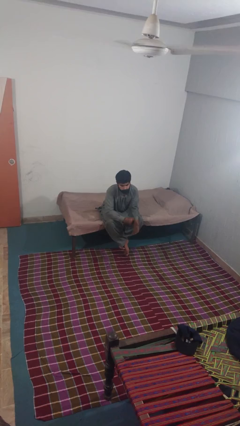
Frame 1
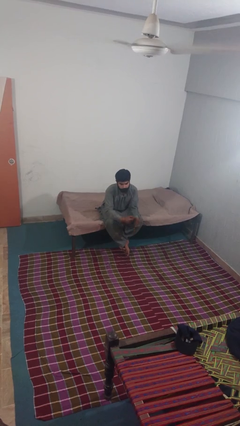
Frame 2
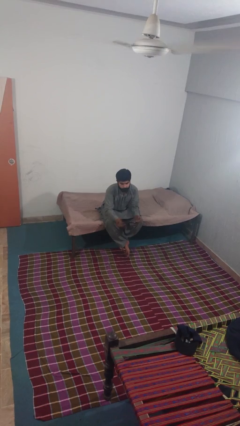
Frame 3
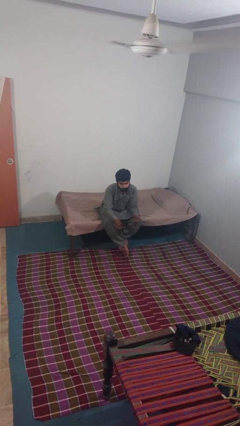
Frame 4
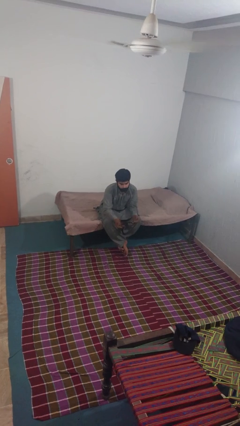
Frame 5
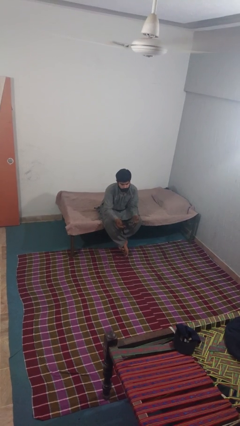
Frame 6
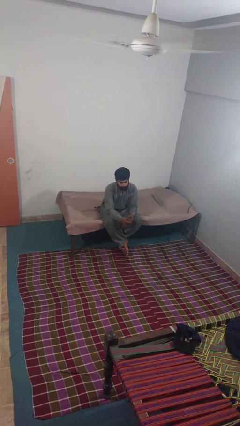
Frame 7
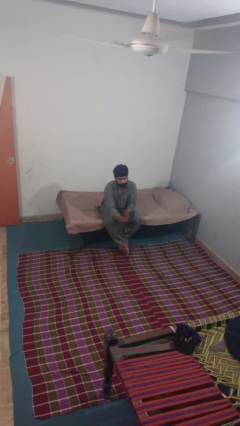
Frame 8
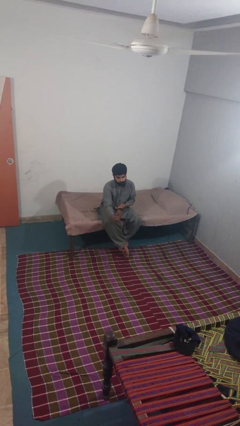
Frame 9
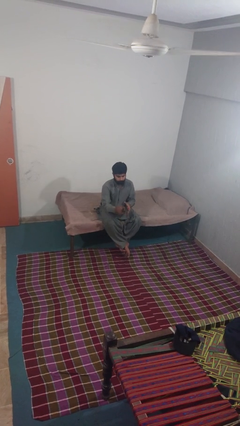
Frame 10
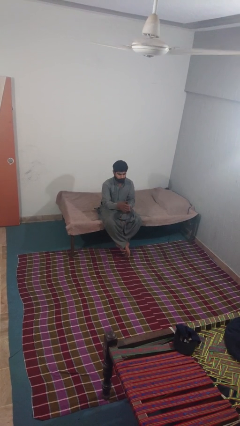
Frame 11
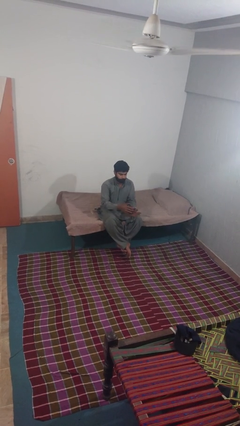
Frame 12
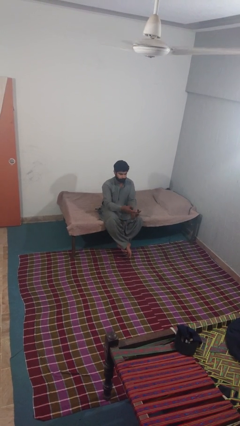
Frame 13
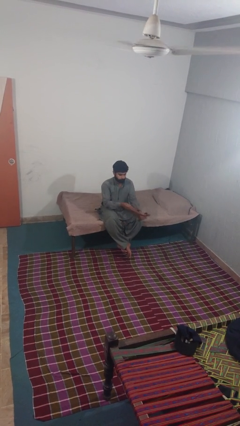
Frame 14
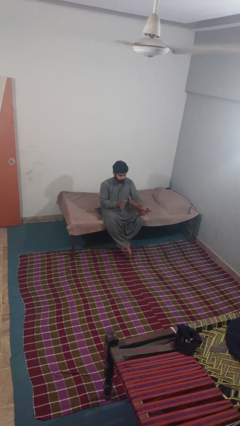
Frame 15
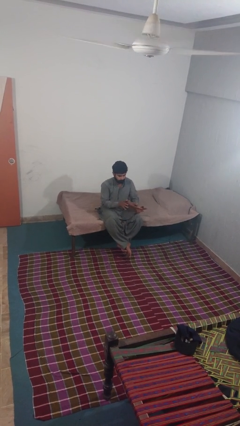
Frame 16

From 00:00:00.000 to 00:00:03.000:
person takes off gloves

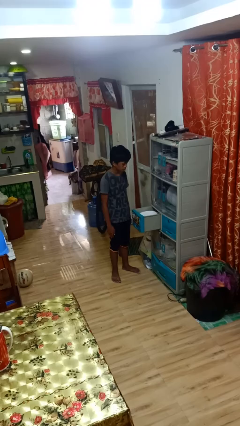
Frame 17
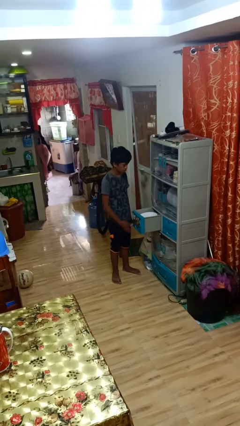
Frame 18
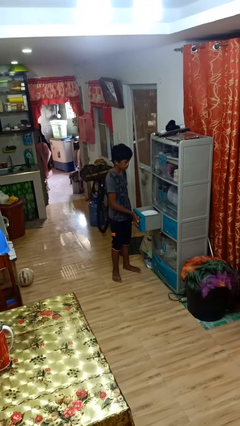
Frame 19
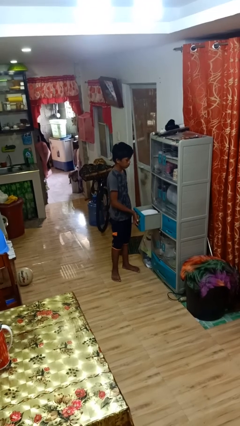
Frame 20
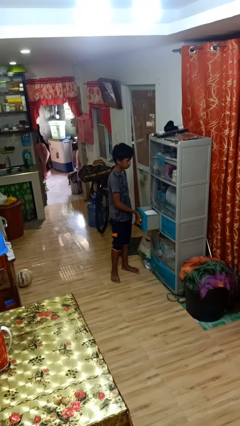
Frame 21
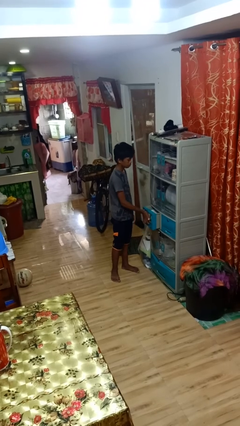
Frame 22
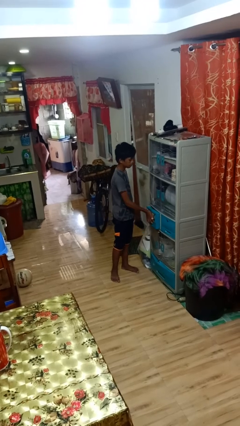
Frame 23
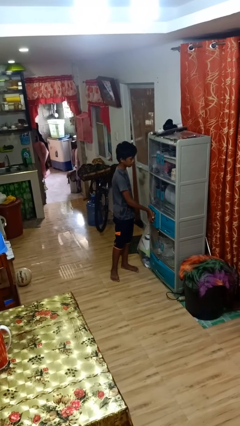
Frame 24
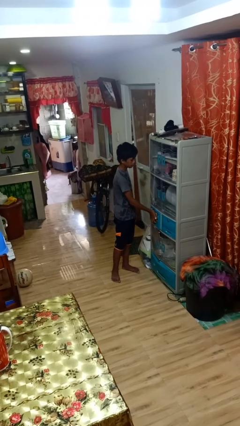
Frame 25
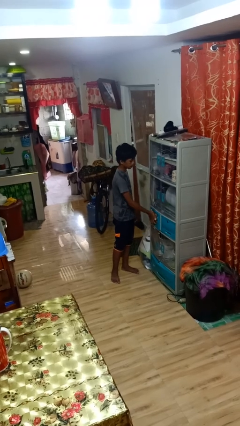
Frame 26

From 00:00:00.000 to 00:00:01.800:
person closes kitchen drawer

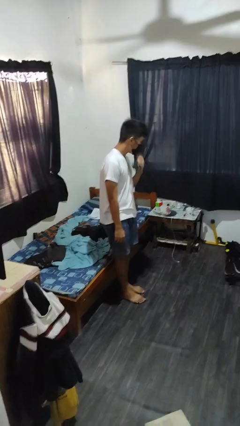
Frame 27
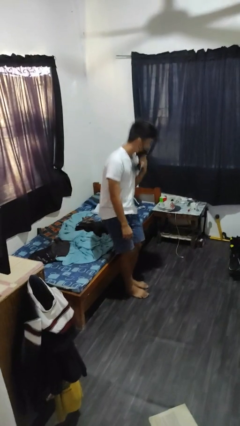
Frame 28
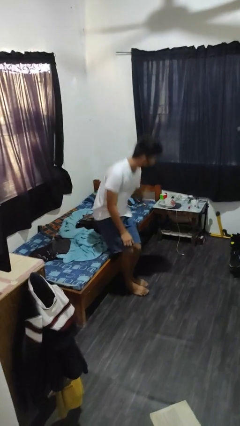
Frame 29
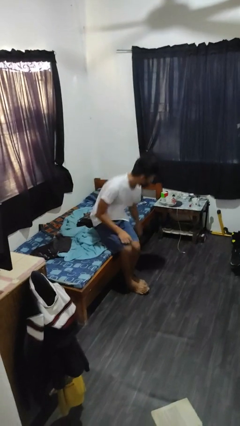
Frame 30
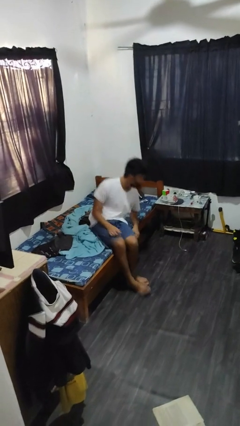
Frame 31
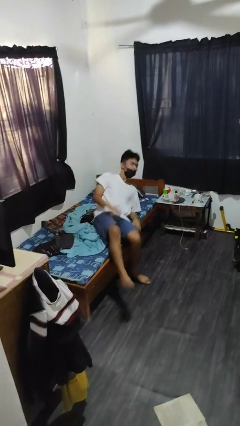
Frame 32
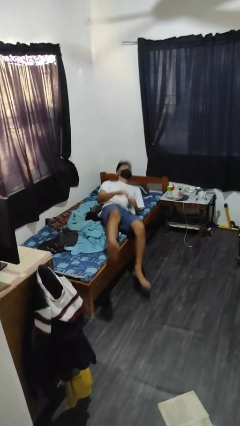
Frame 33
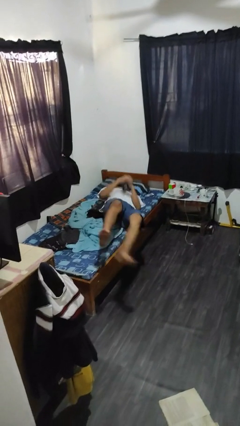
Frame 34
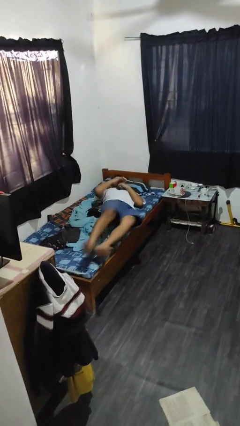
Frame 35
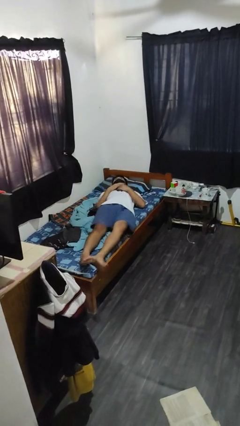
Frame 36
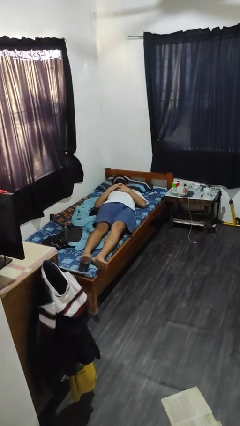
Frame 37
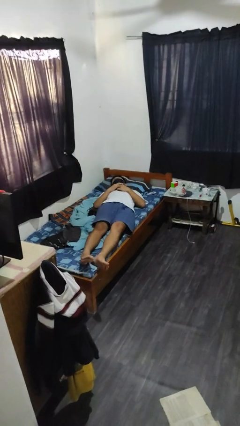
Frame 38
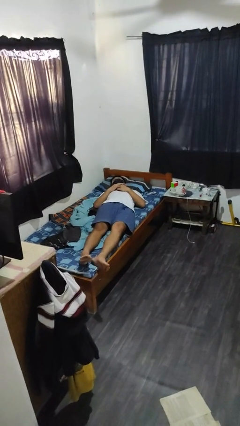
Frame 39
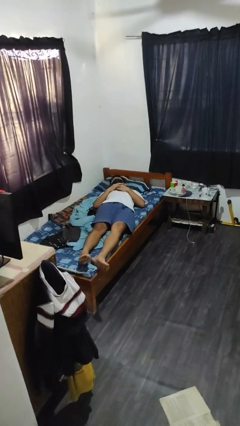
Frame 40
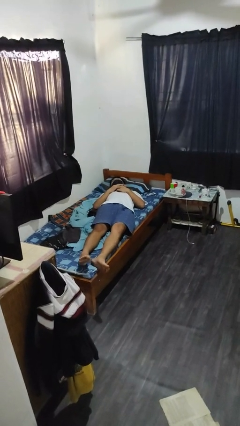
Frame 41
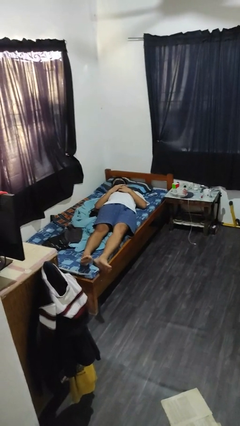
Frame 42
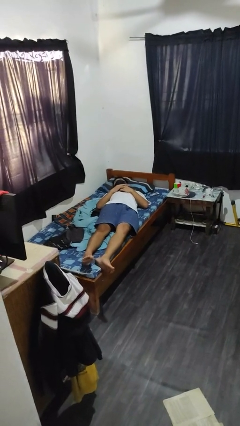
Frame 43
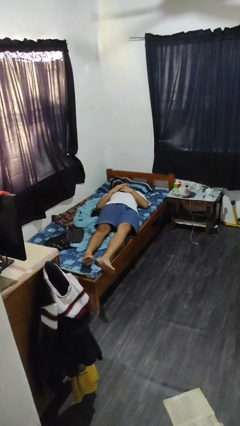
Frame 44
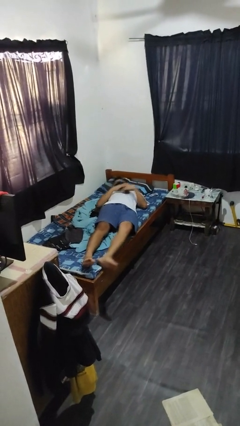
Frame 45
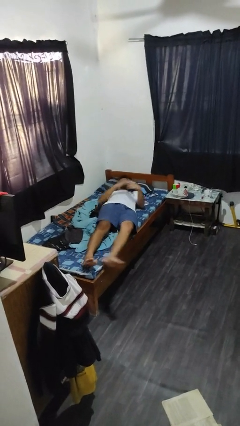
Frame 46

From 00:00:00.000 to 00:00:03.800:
person lies down on bed

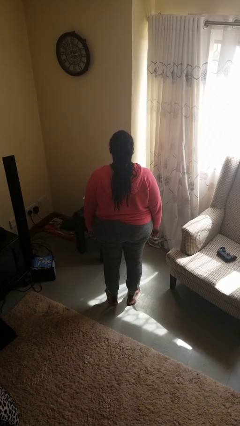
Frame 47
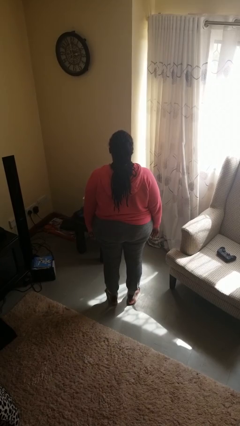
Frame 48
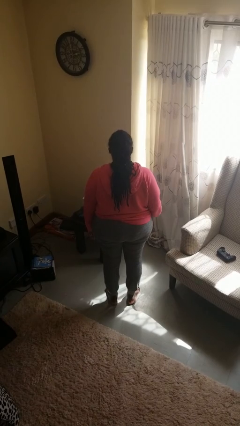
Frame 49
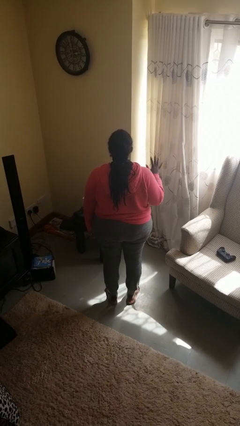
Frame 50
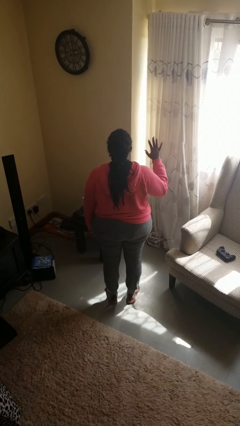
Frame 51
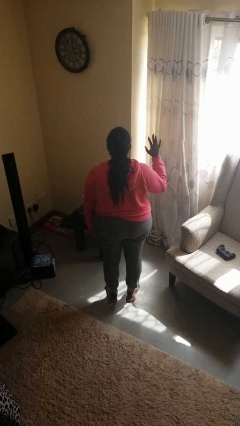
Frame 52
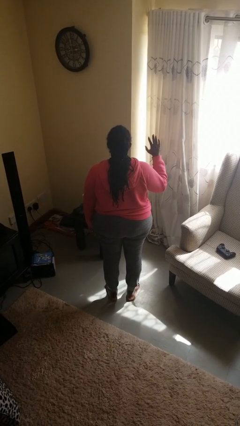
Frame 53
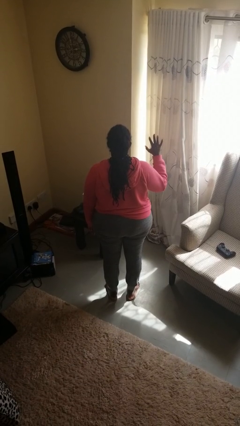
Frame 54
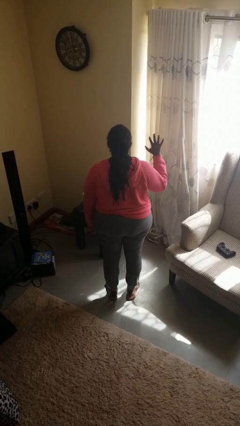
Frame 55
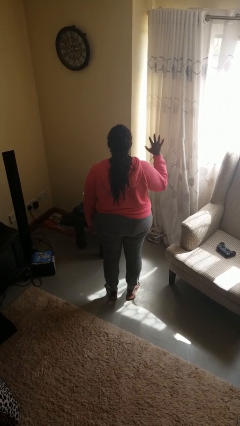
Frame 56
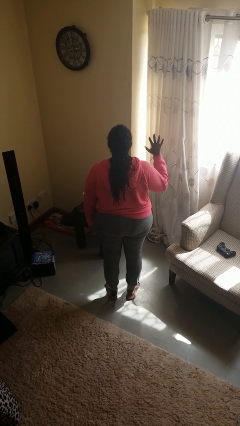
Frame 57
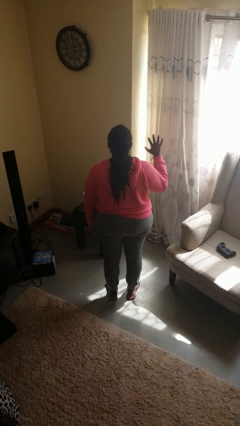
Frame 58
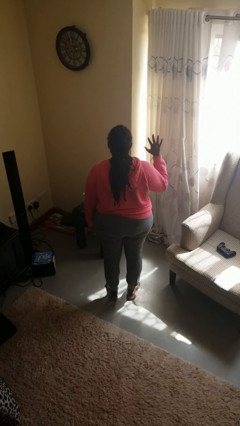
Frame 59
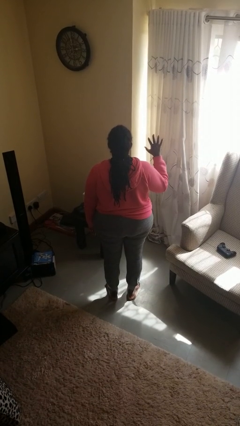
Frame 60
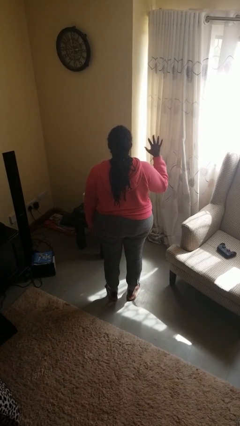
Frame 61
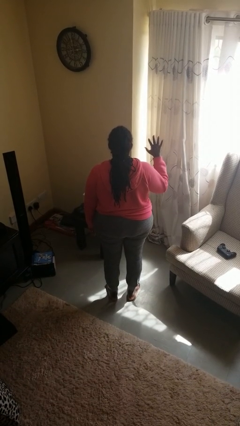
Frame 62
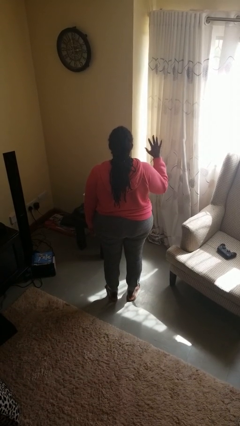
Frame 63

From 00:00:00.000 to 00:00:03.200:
person gestures number five

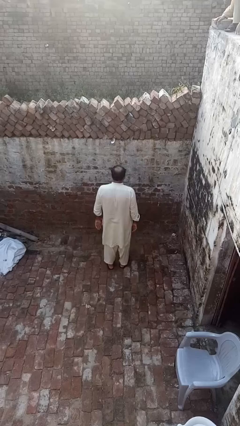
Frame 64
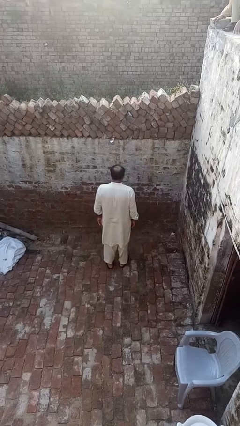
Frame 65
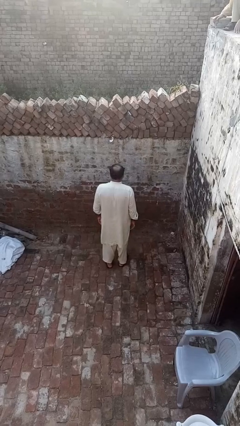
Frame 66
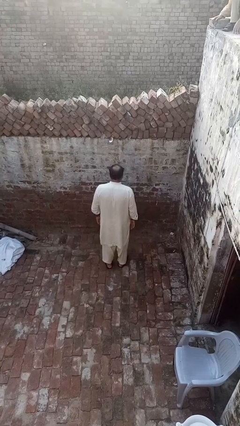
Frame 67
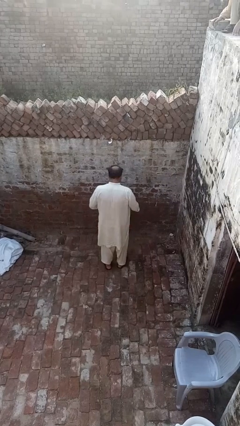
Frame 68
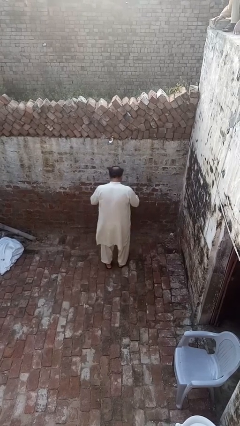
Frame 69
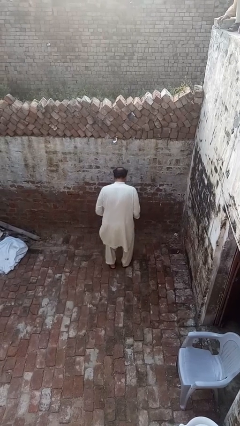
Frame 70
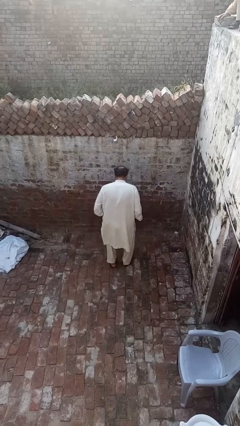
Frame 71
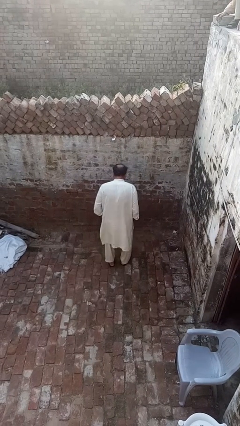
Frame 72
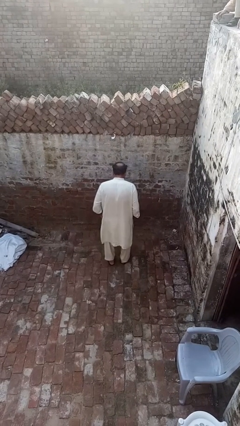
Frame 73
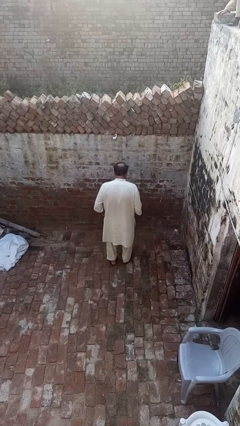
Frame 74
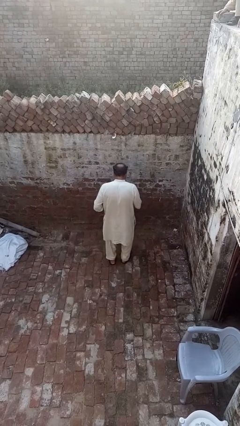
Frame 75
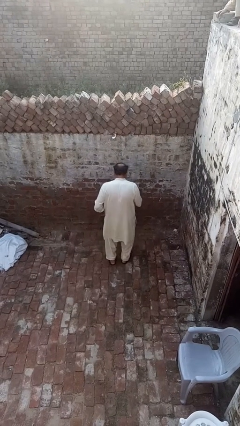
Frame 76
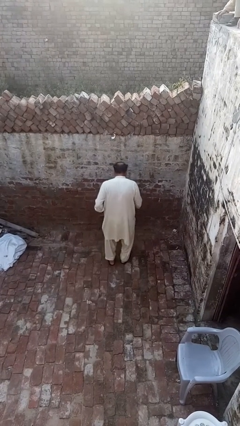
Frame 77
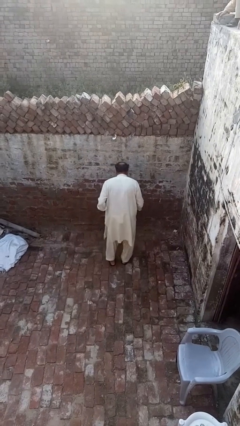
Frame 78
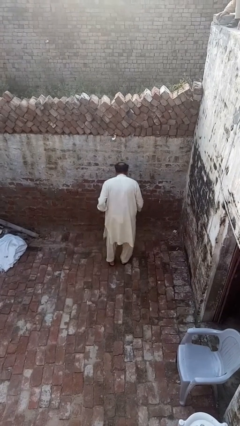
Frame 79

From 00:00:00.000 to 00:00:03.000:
person slaps hands on thighs

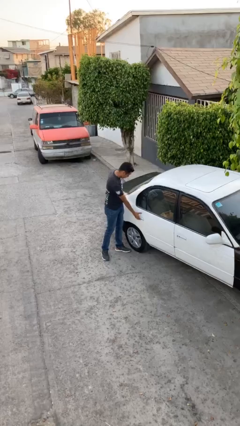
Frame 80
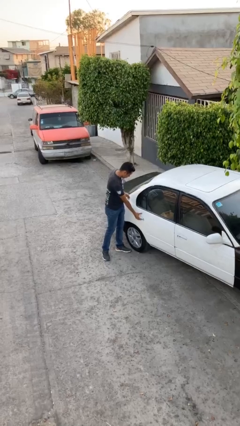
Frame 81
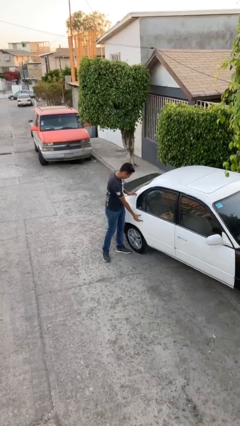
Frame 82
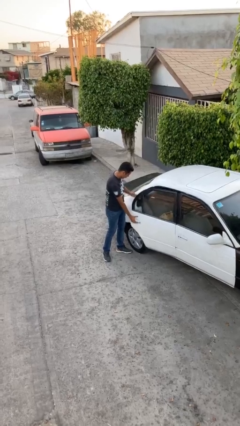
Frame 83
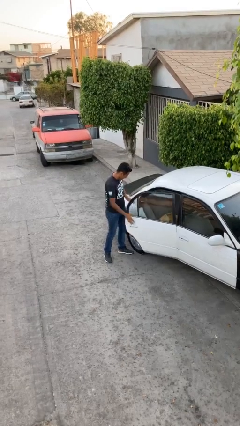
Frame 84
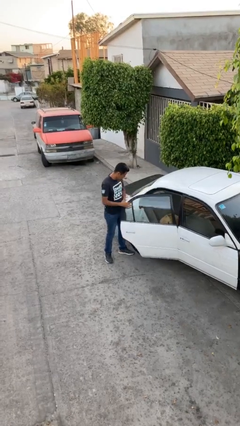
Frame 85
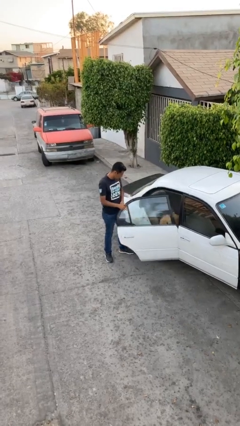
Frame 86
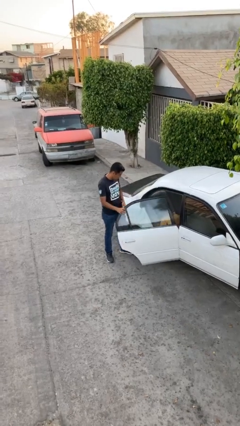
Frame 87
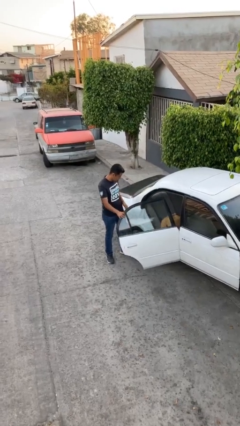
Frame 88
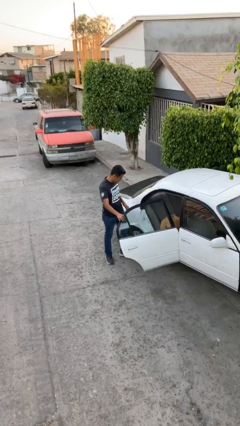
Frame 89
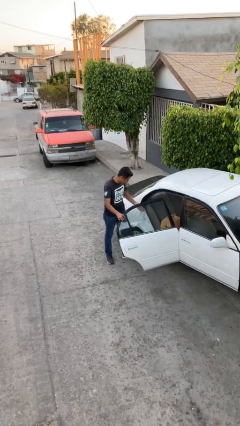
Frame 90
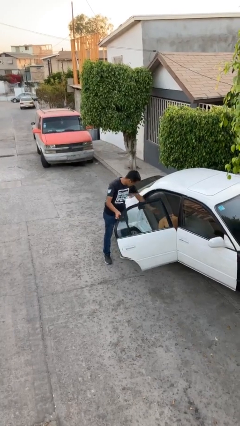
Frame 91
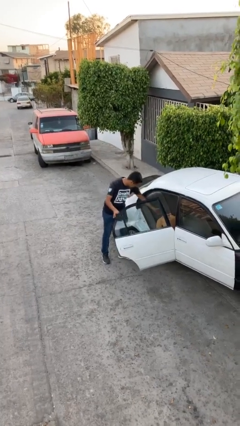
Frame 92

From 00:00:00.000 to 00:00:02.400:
person opens car door

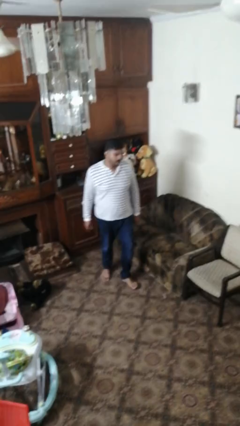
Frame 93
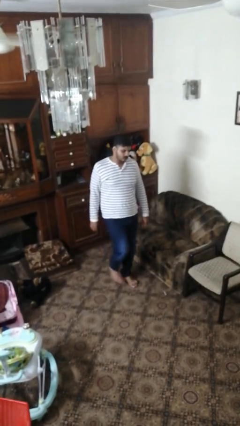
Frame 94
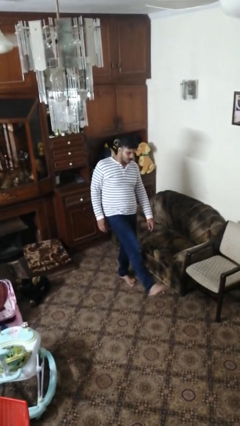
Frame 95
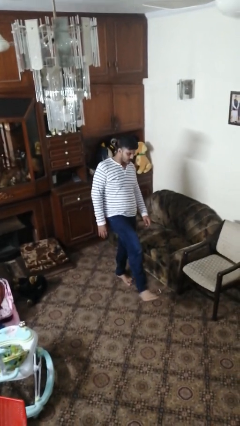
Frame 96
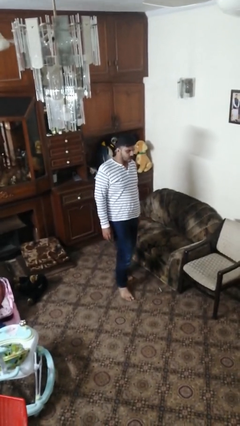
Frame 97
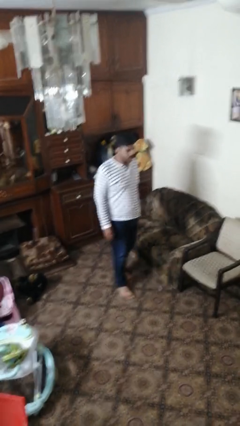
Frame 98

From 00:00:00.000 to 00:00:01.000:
person karate kicks
